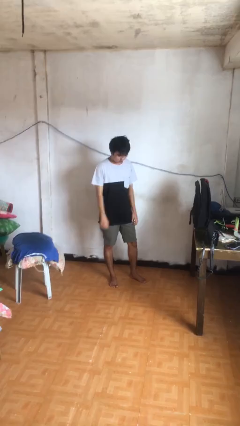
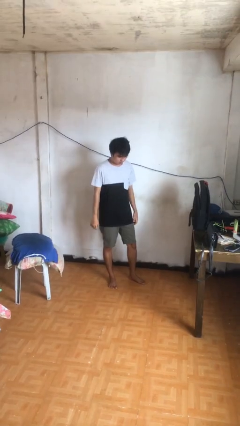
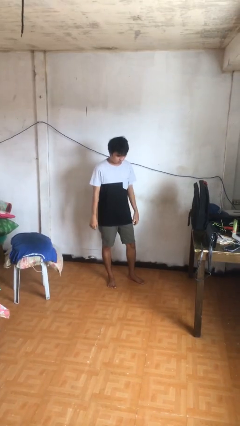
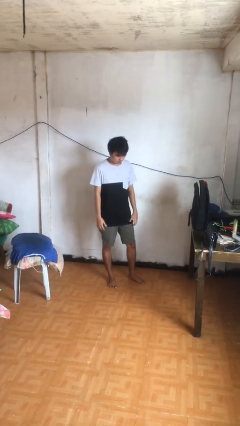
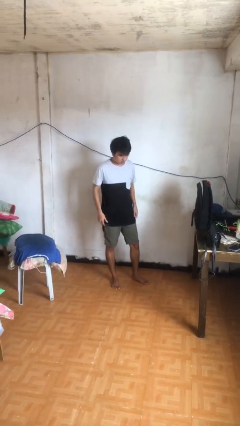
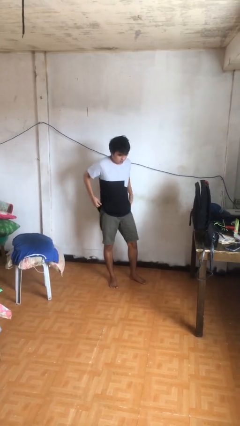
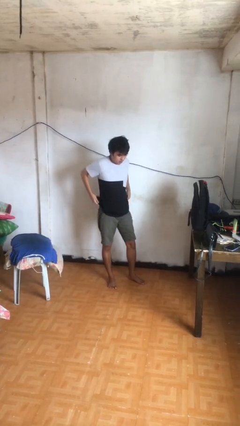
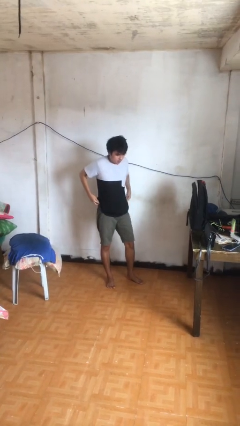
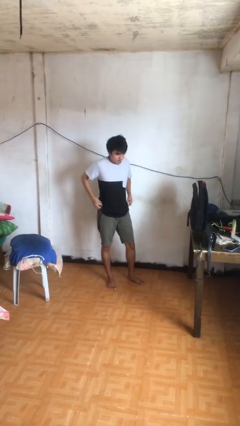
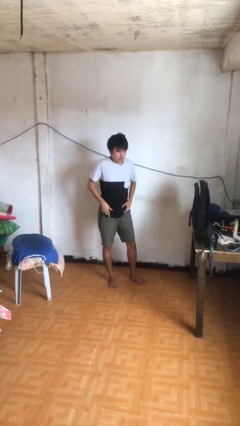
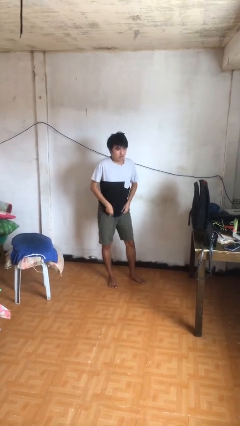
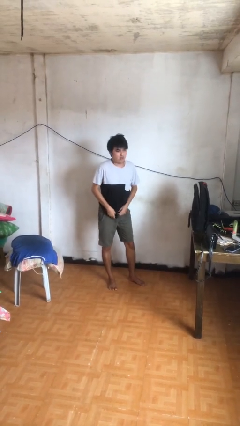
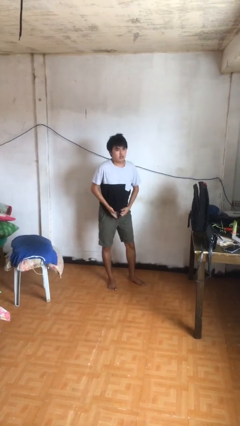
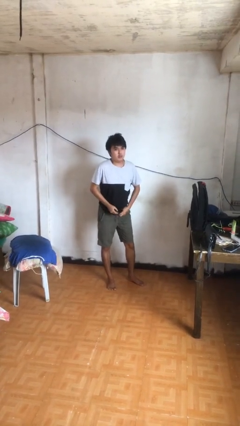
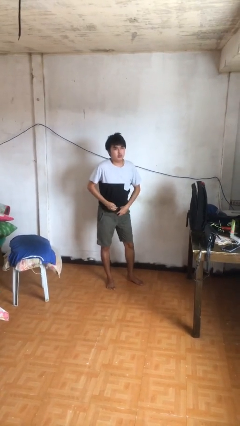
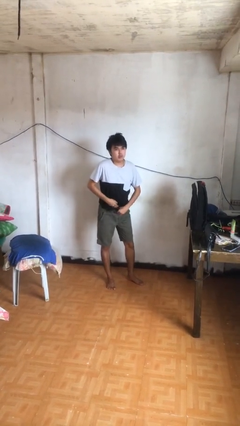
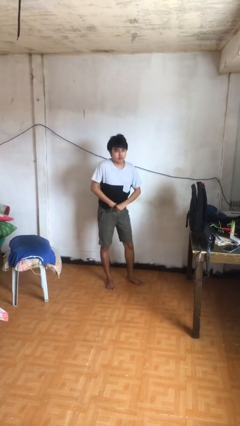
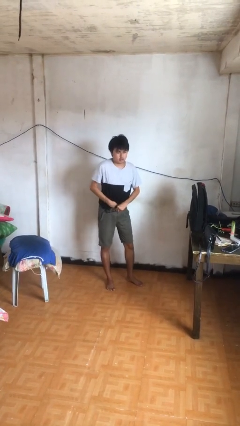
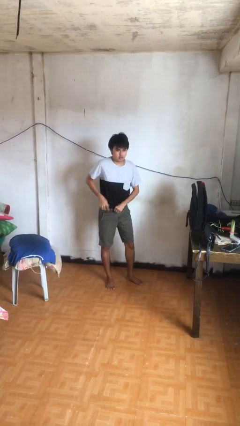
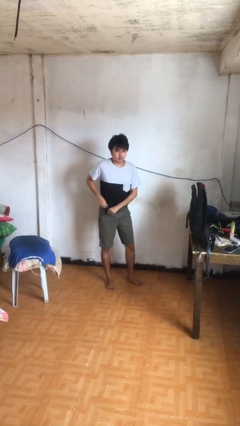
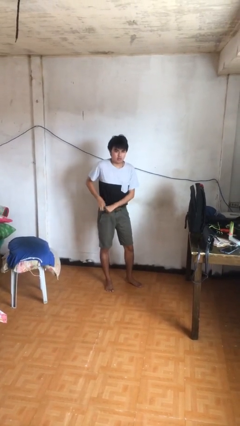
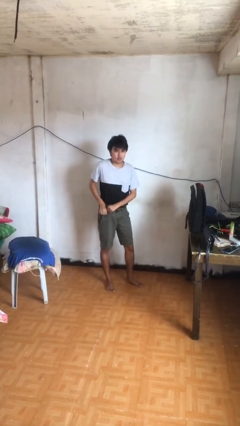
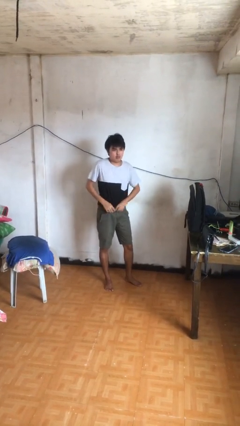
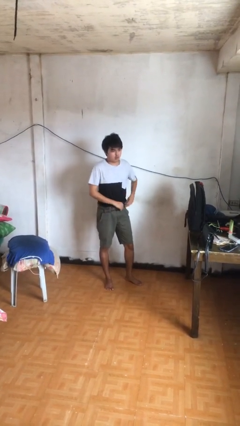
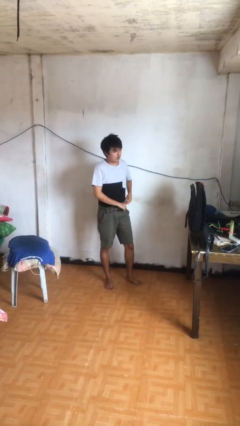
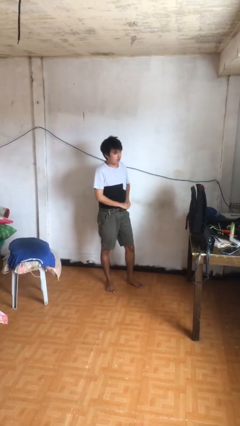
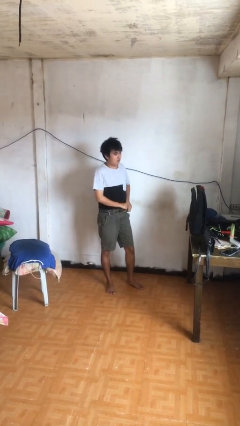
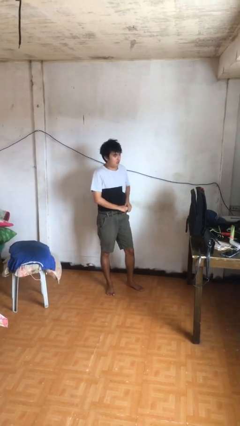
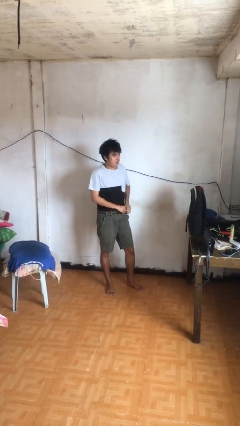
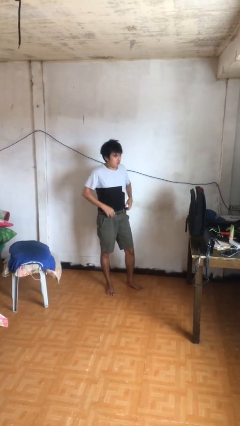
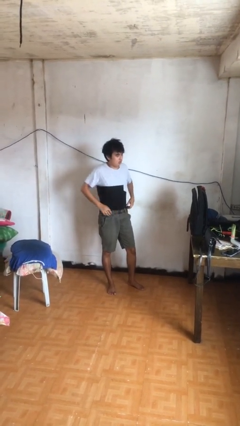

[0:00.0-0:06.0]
person tucks in shirt

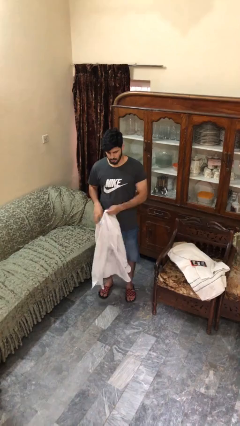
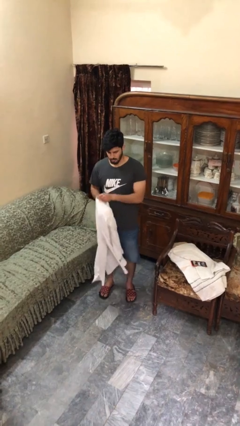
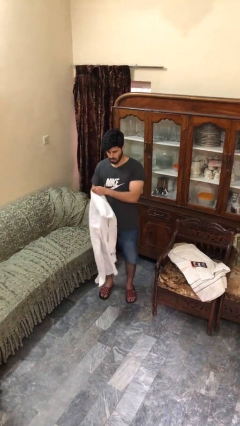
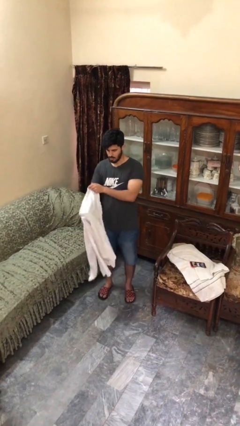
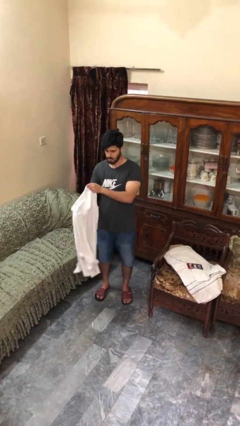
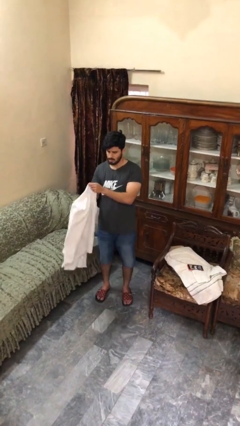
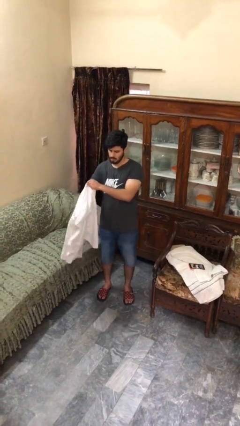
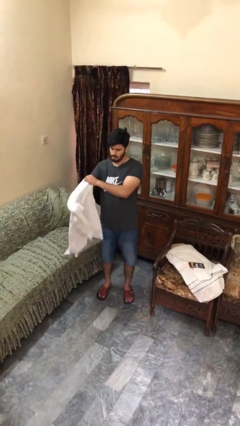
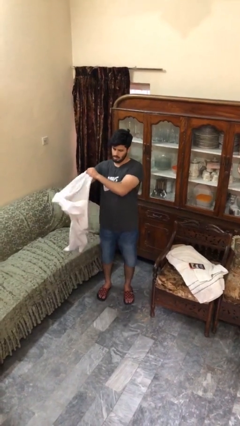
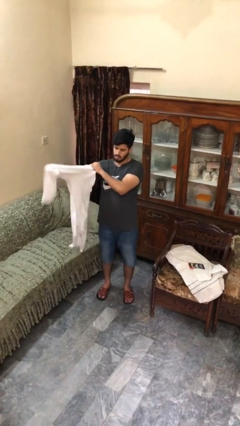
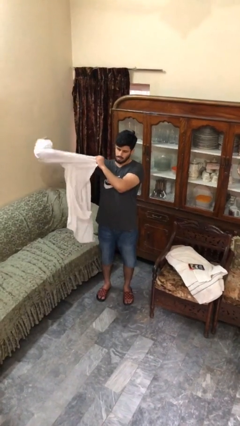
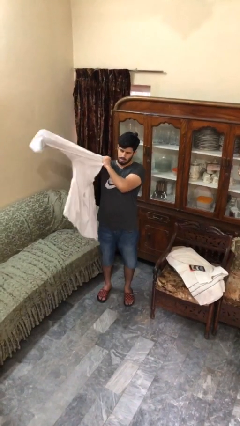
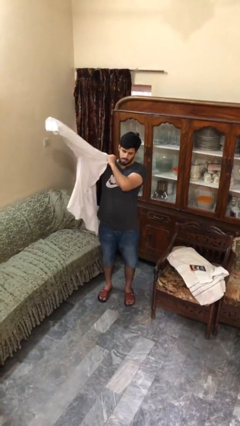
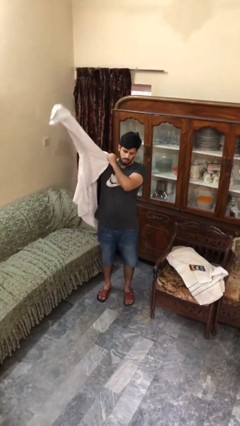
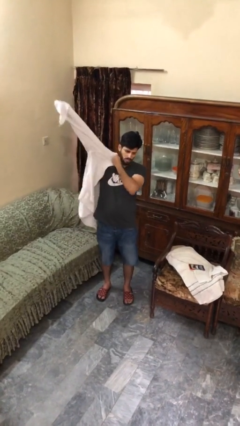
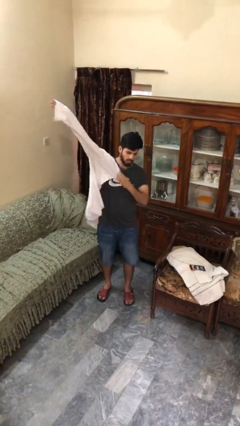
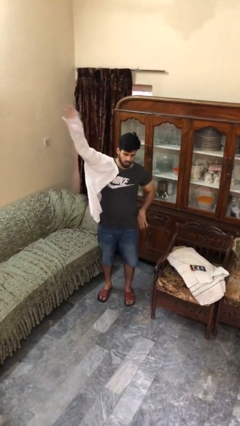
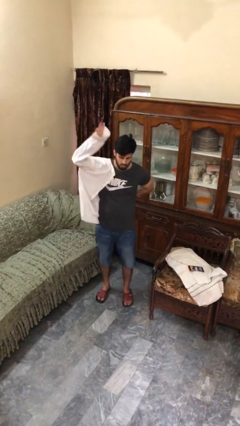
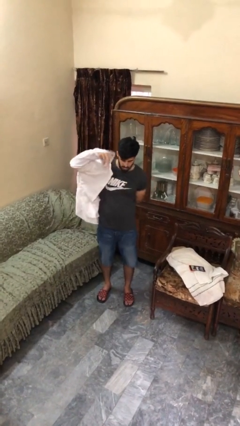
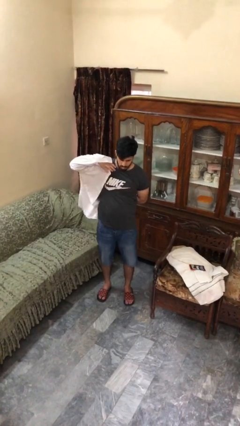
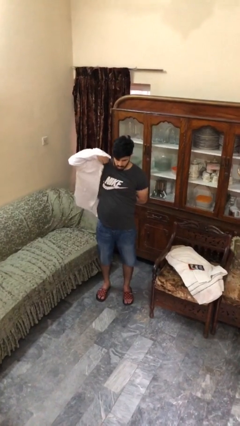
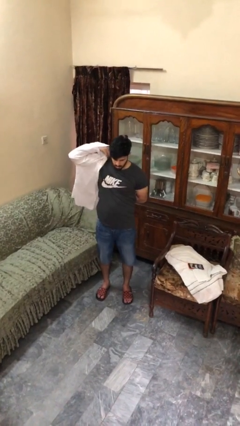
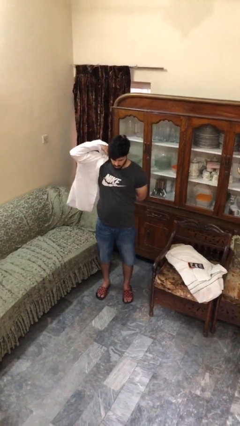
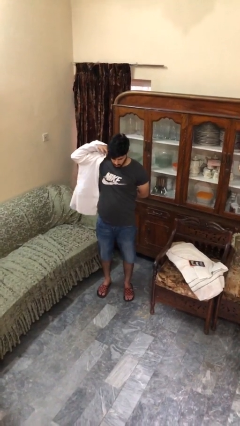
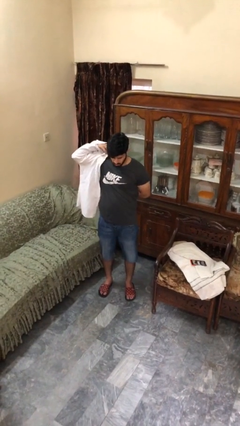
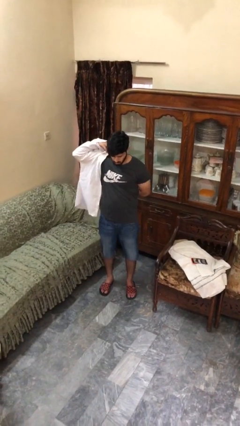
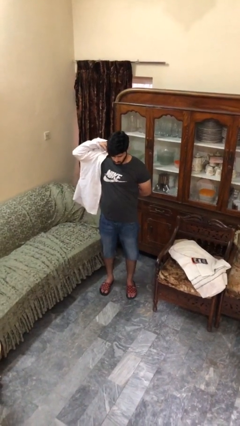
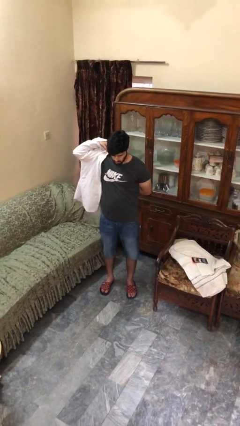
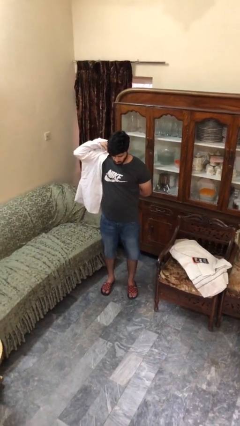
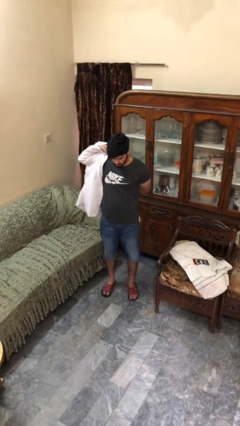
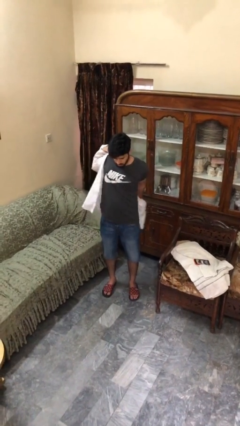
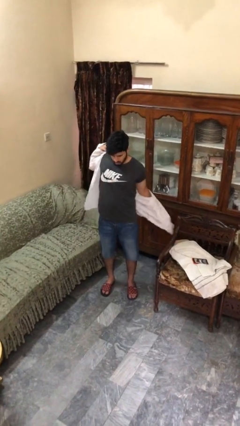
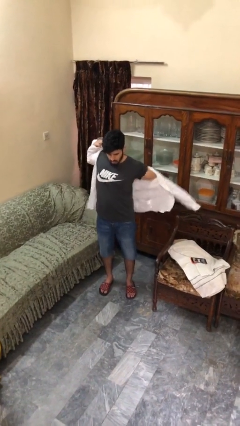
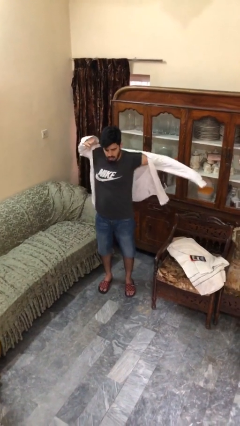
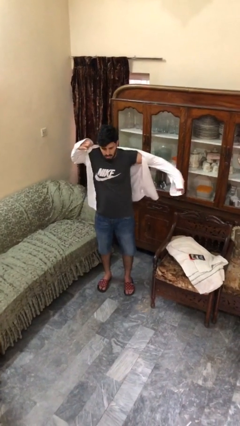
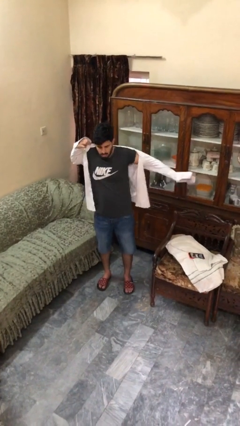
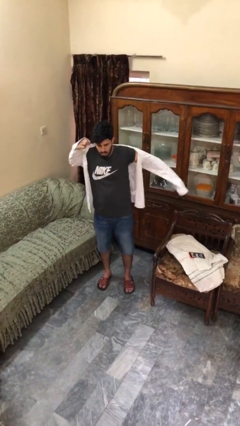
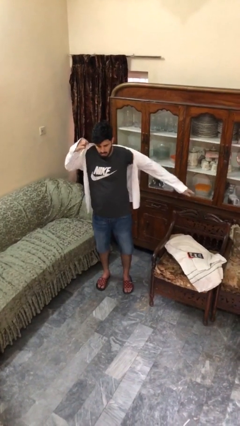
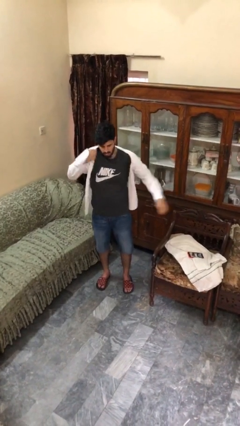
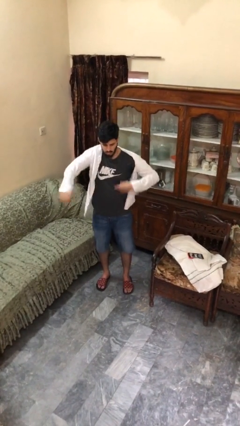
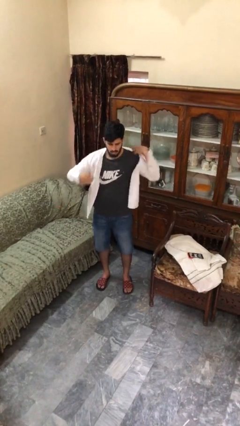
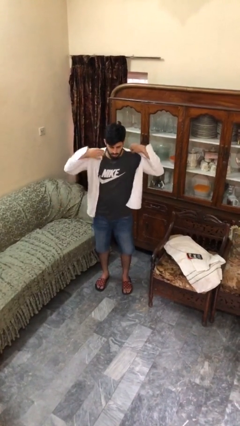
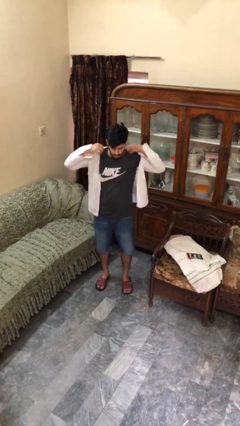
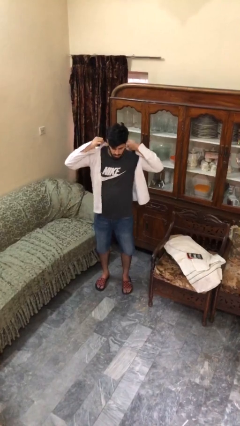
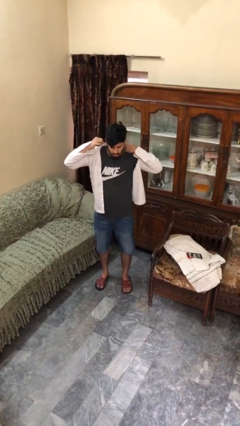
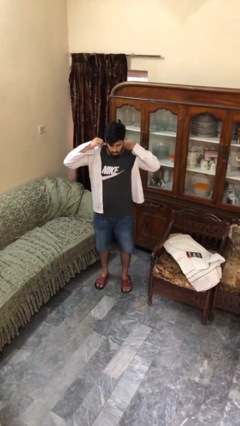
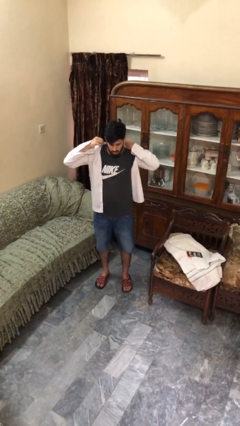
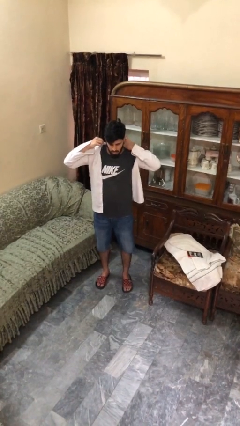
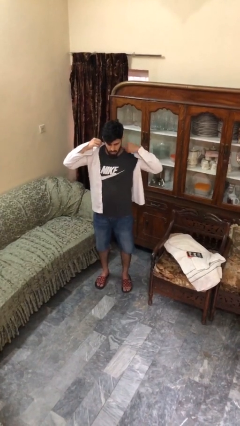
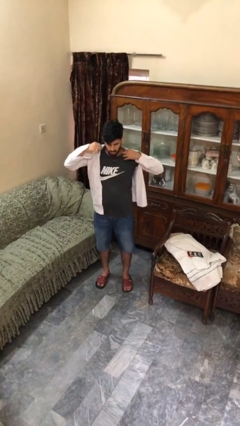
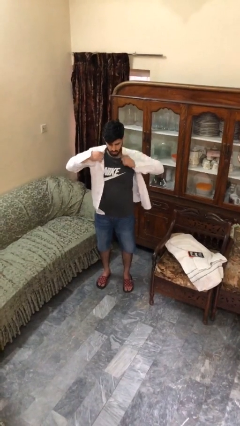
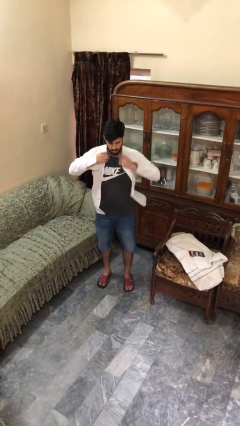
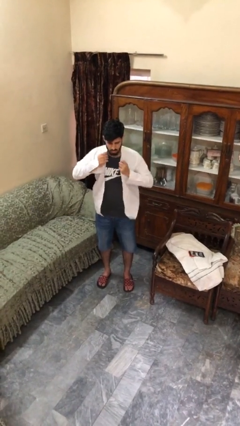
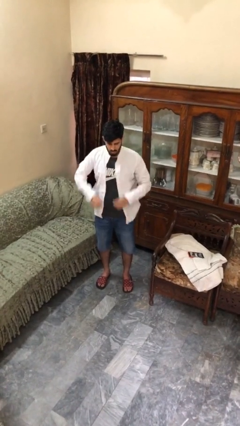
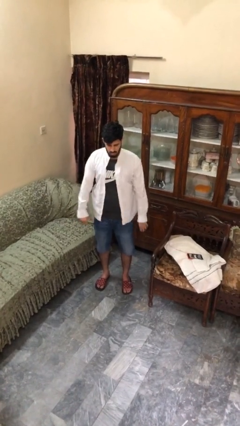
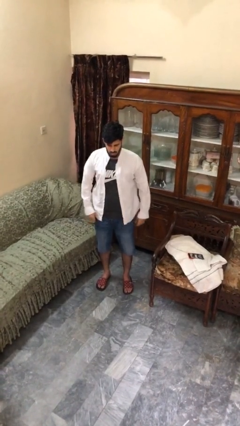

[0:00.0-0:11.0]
person puts on shirt

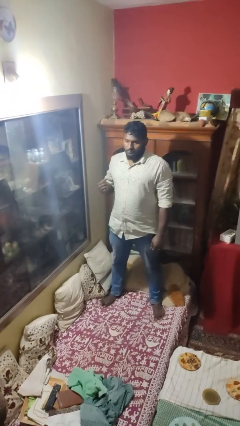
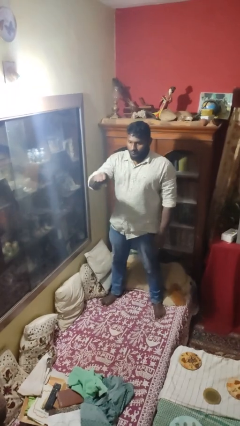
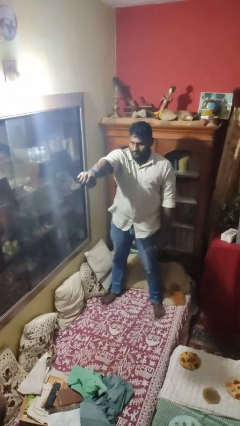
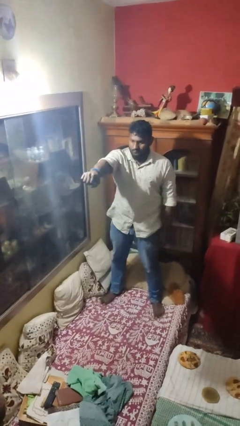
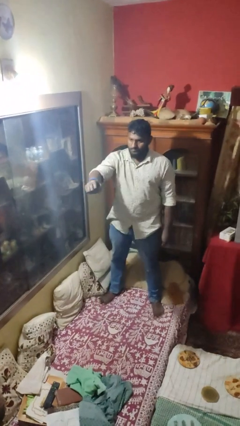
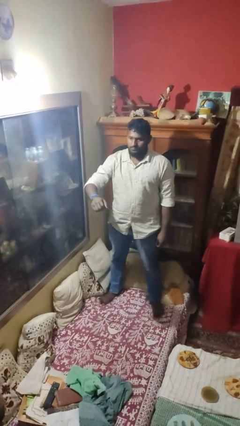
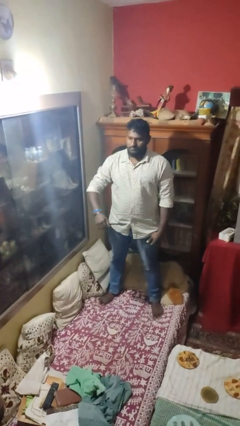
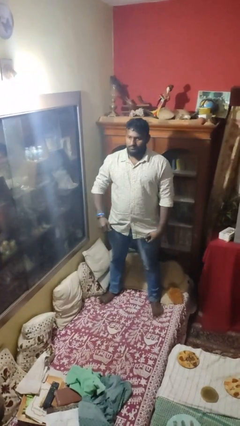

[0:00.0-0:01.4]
person punches
